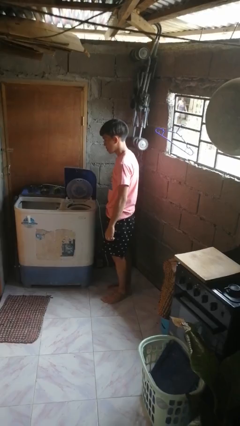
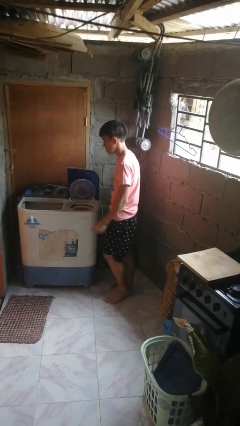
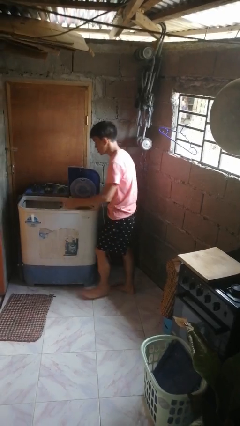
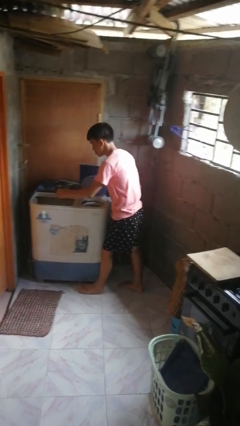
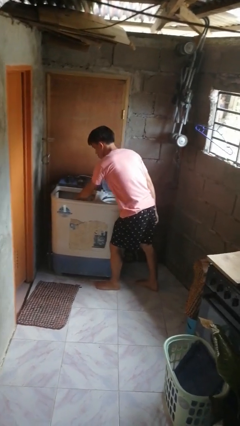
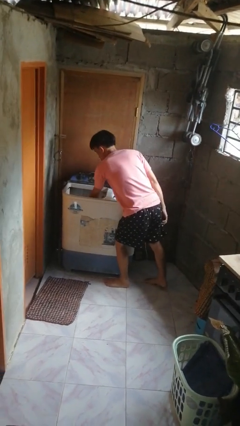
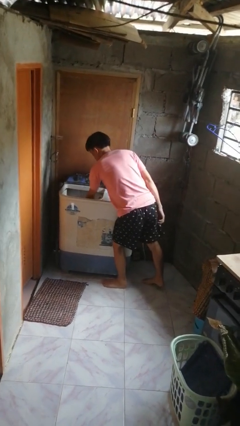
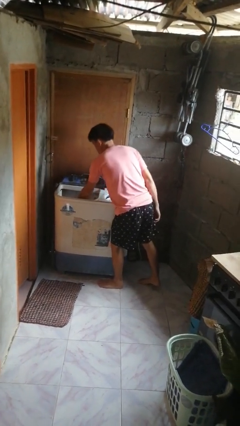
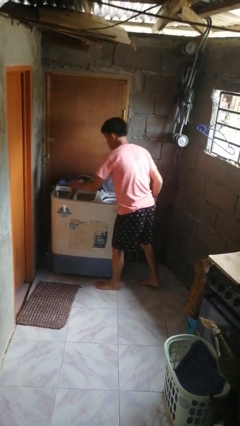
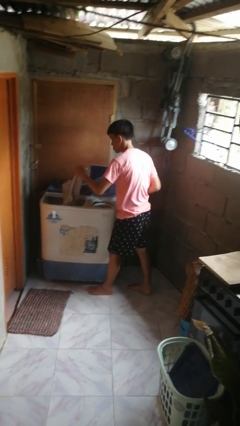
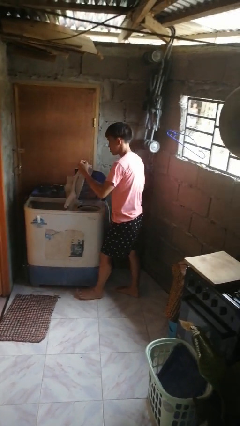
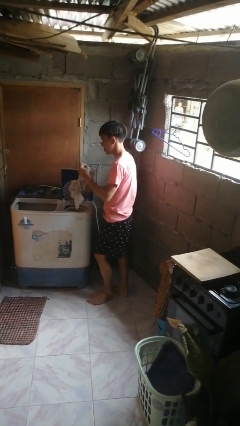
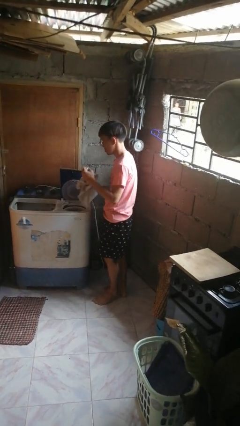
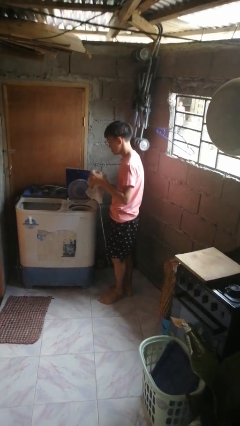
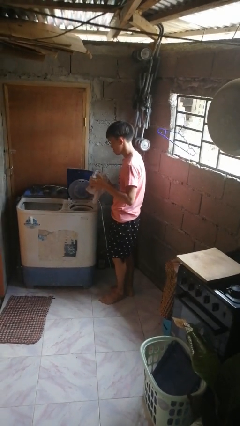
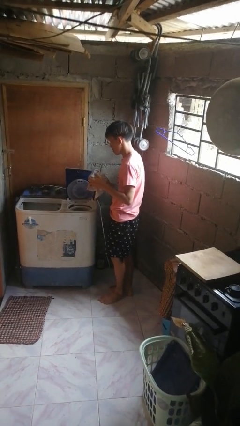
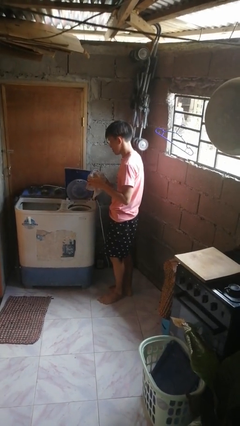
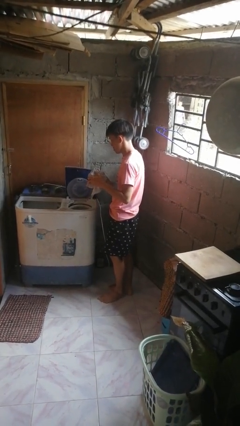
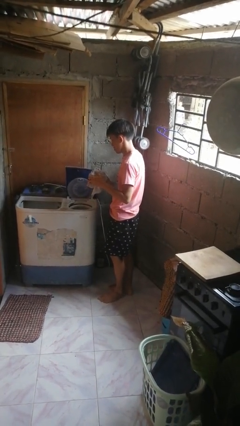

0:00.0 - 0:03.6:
person unloads clotheswasher

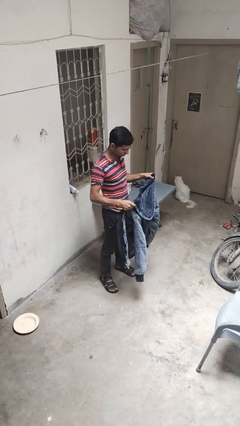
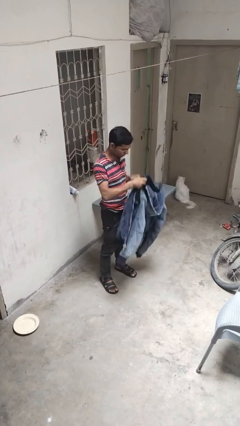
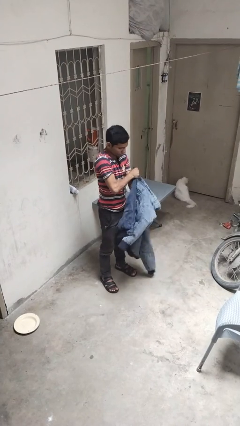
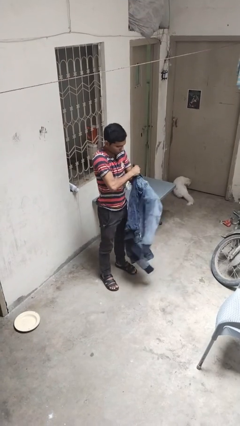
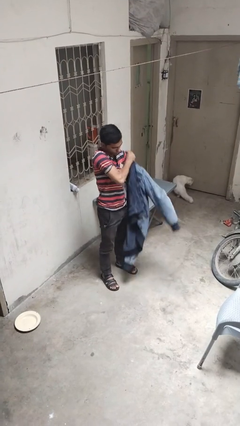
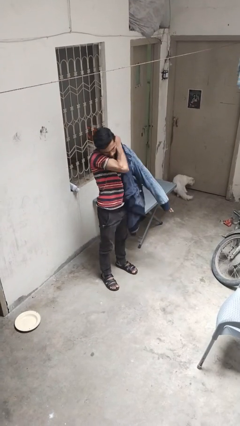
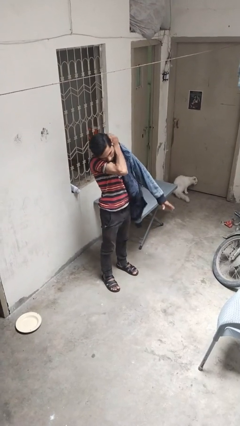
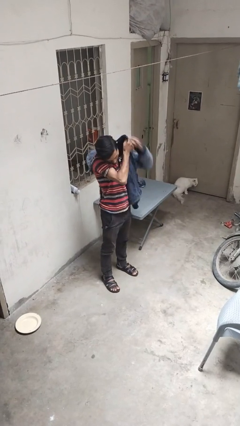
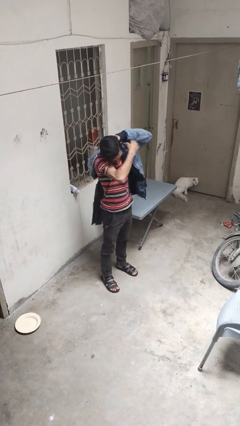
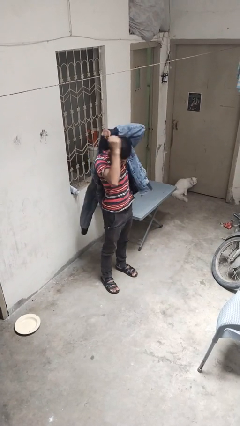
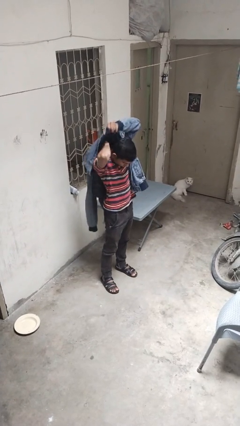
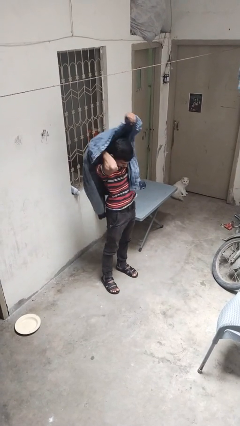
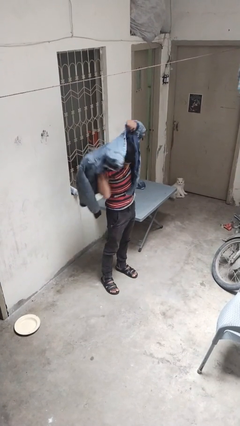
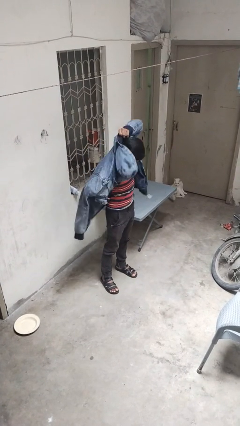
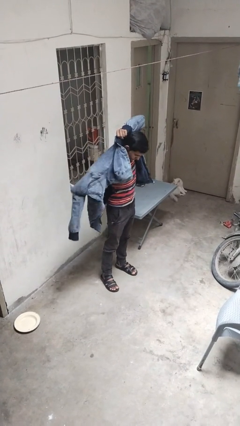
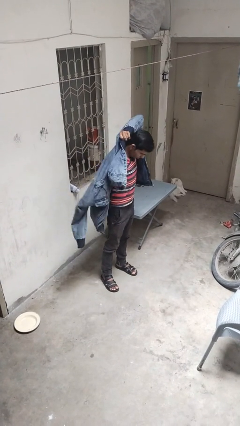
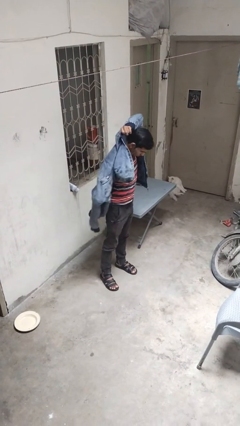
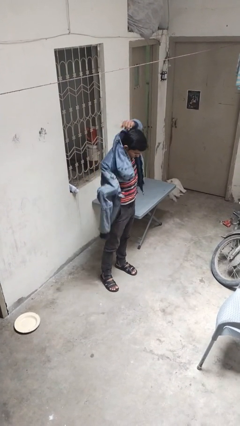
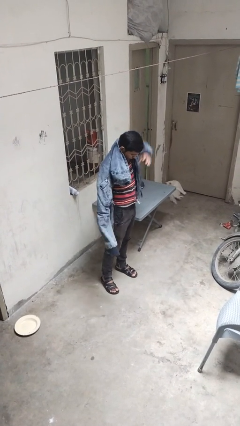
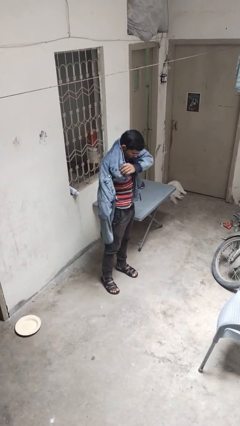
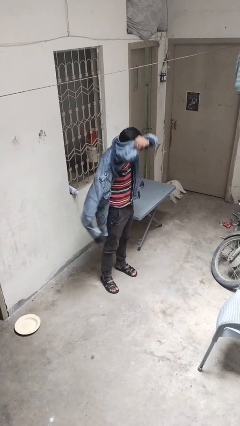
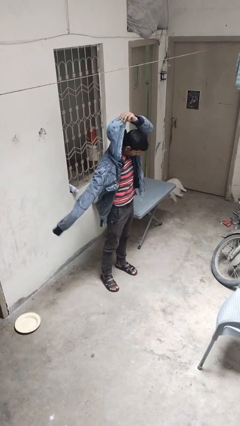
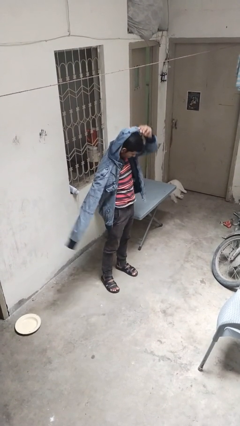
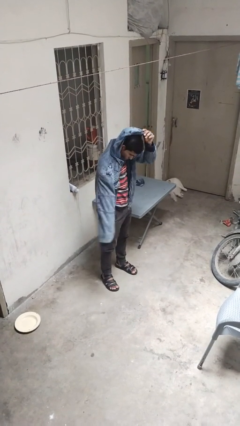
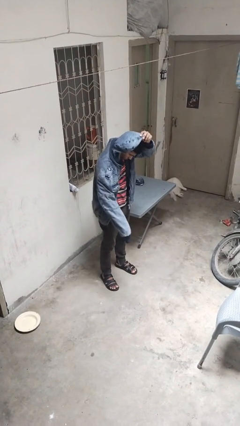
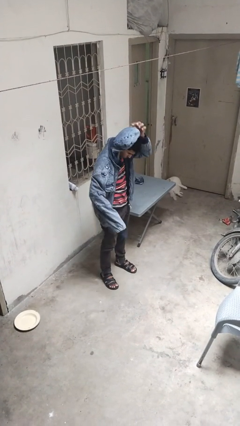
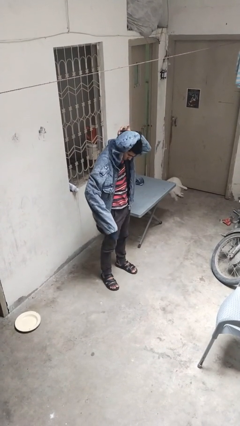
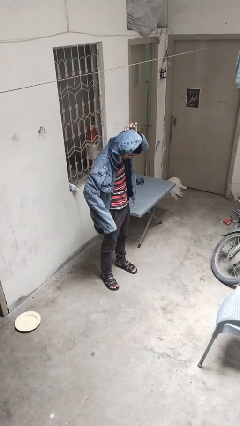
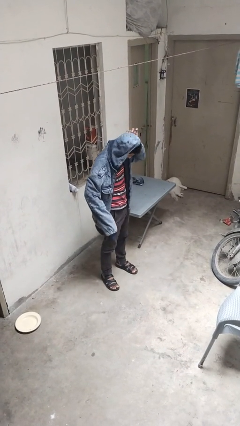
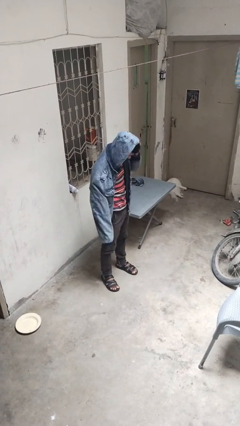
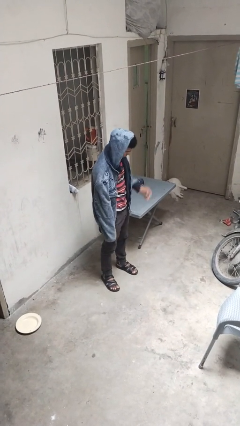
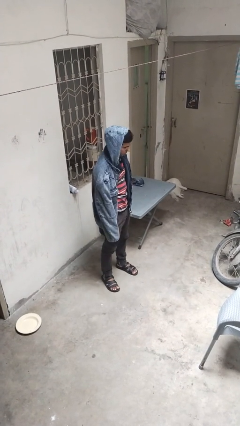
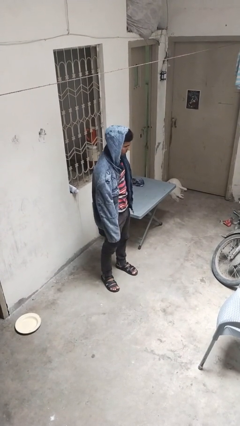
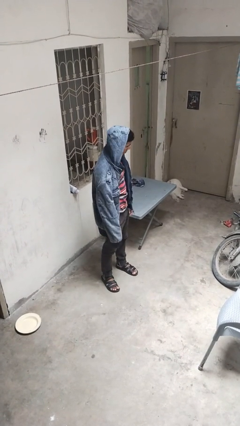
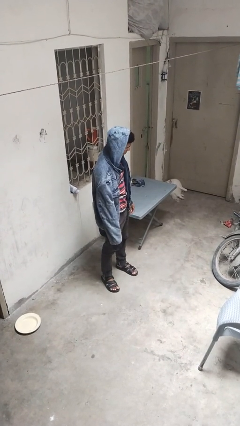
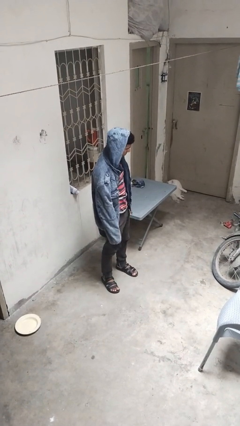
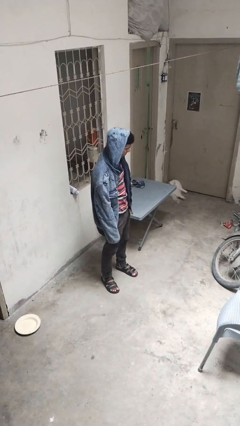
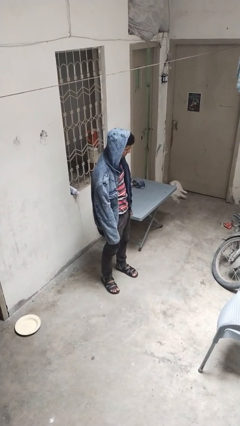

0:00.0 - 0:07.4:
person puts on hoodie

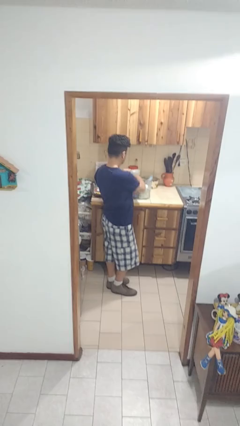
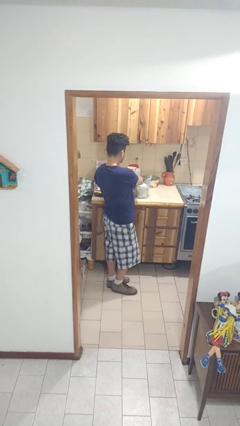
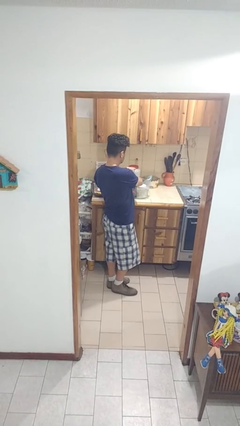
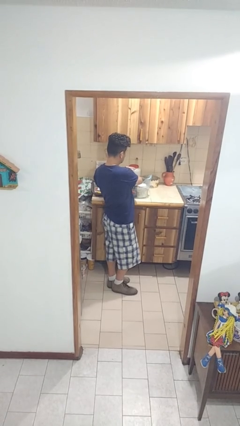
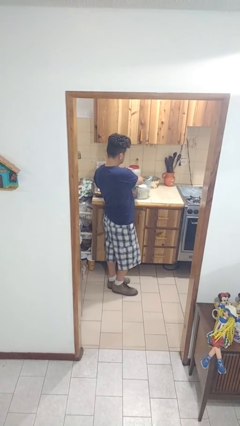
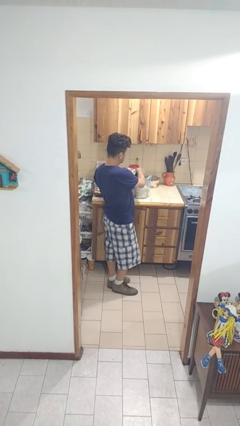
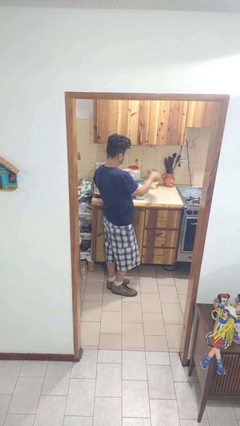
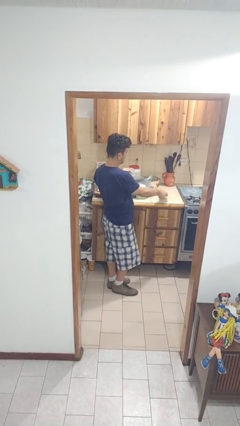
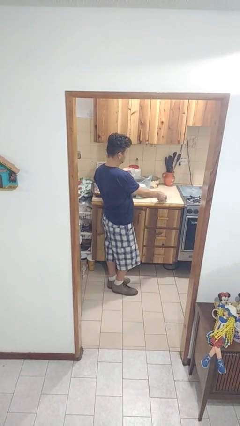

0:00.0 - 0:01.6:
person takes object from bag

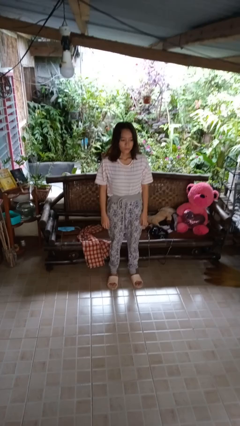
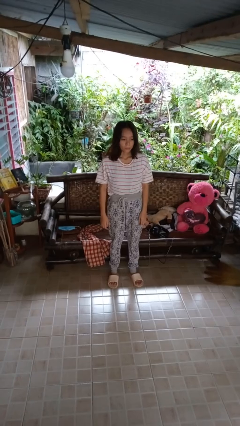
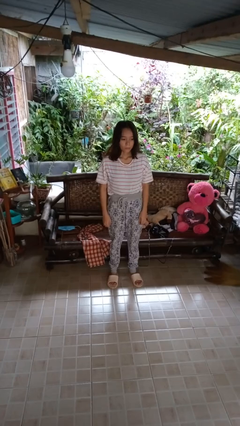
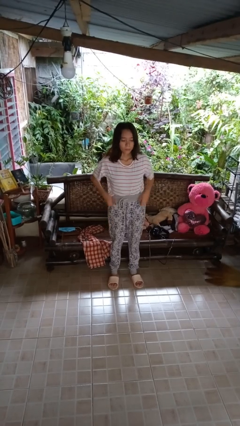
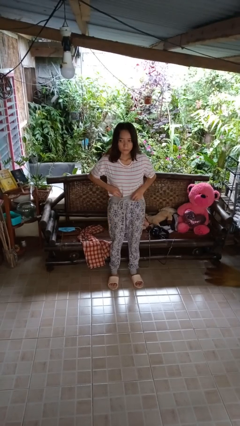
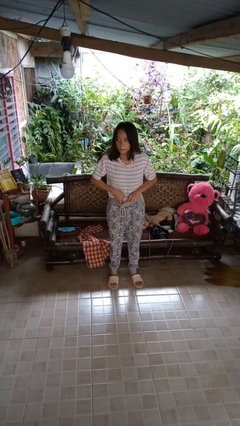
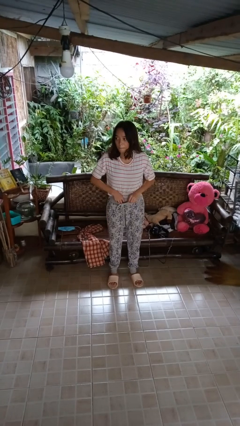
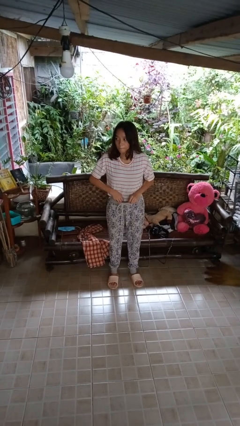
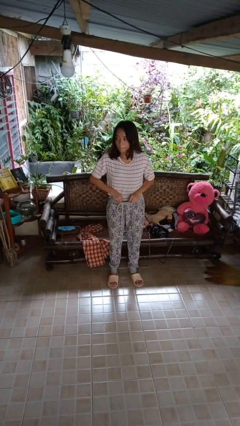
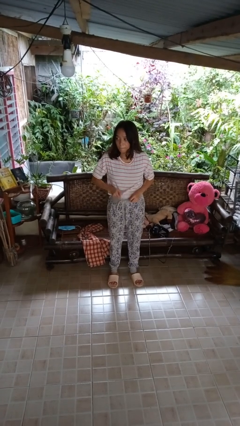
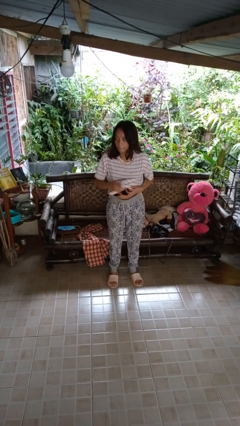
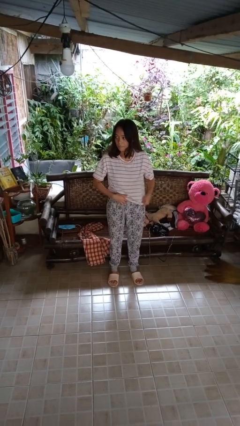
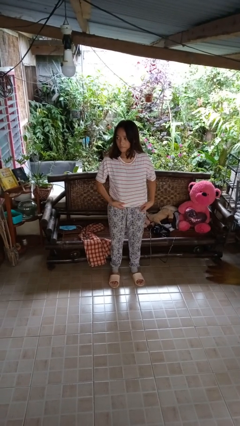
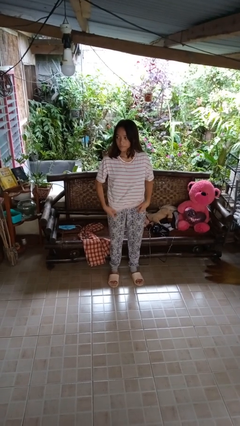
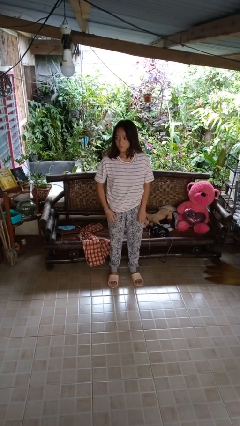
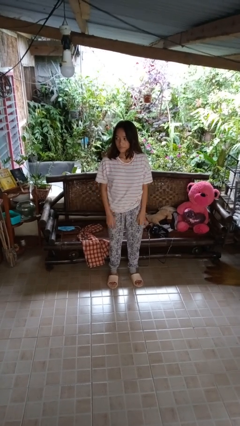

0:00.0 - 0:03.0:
person untucks shirt

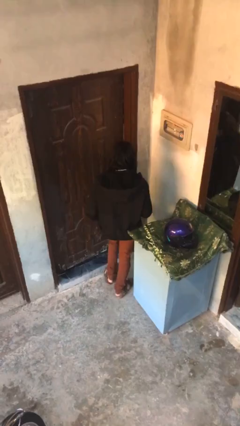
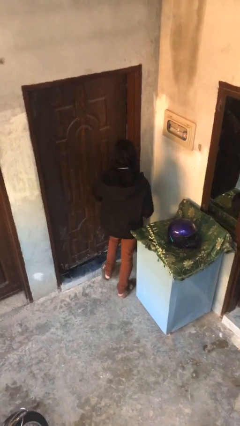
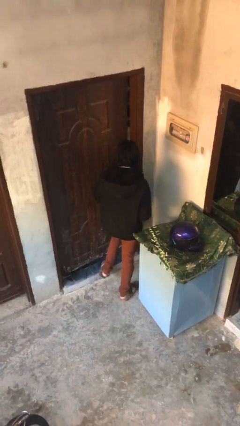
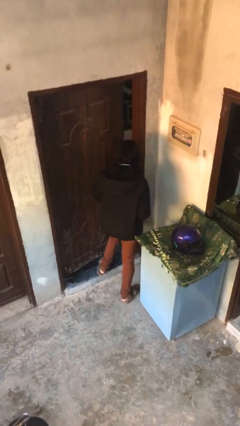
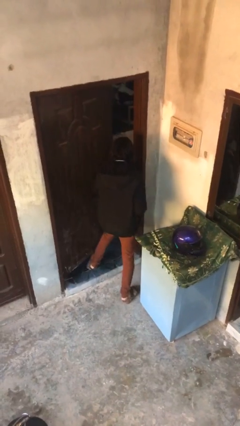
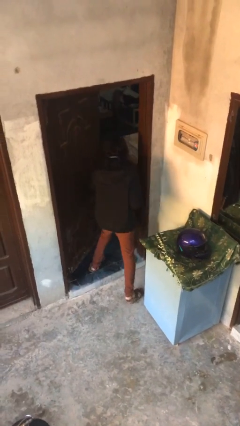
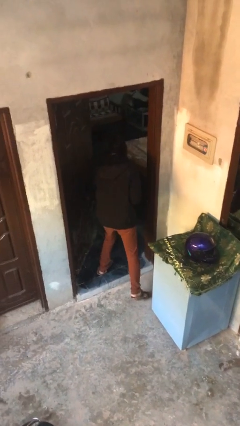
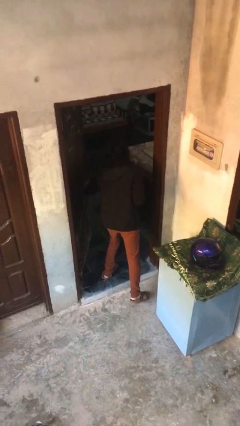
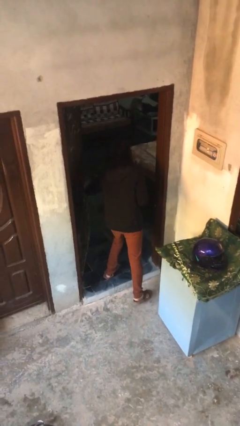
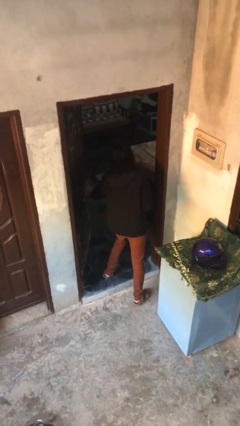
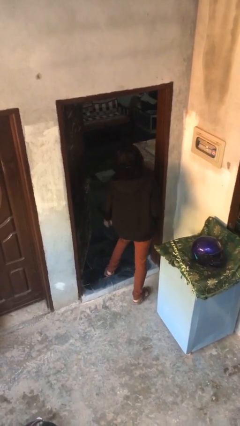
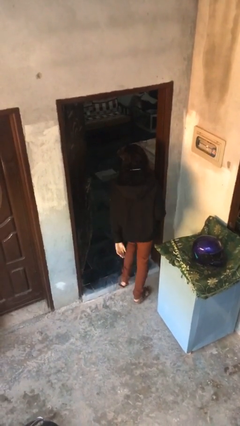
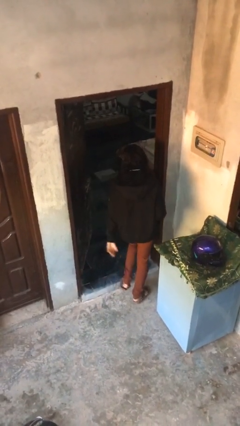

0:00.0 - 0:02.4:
person opens facility door
